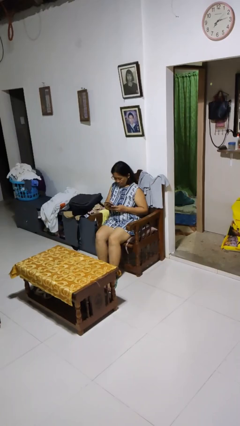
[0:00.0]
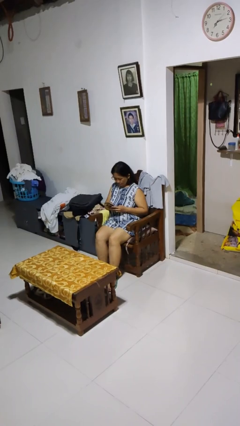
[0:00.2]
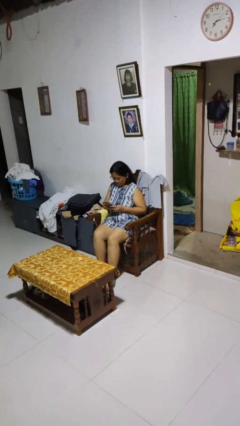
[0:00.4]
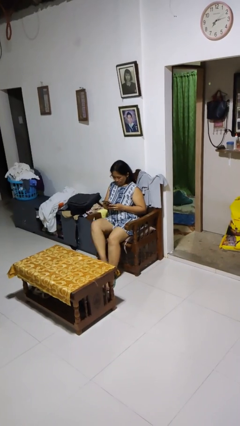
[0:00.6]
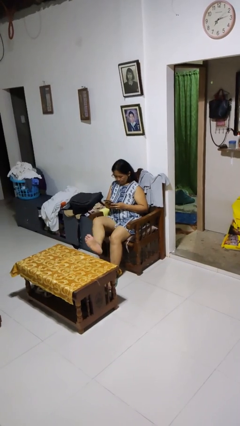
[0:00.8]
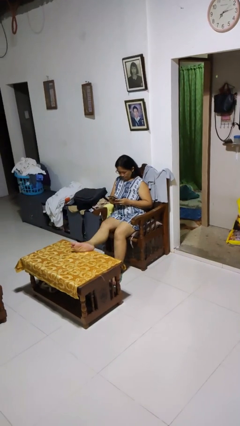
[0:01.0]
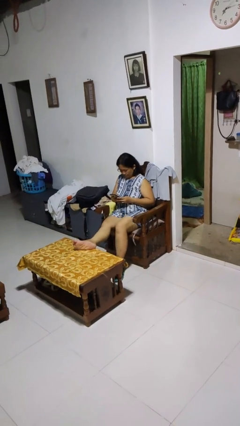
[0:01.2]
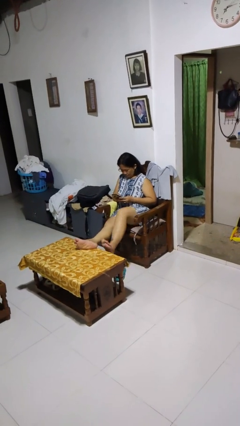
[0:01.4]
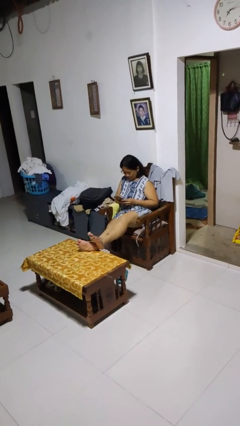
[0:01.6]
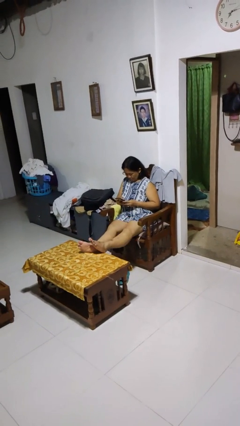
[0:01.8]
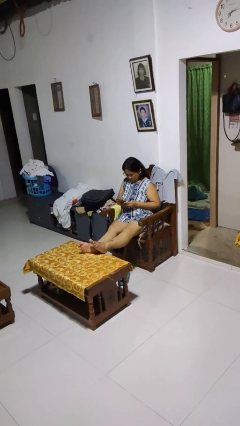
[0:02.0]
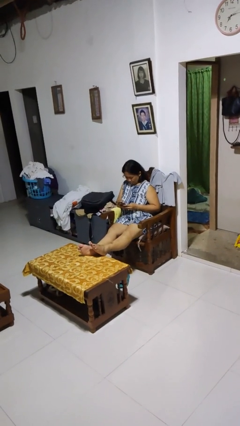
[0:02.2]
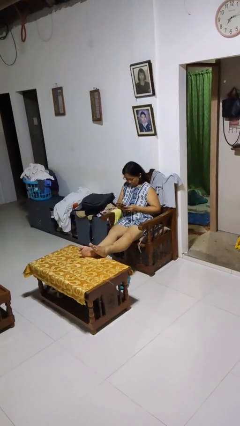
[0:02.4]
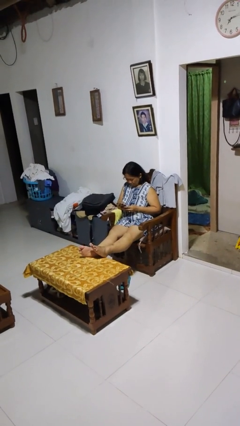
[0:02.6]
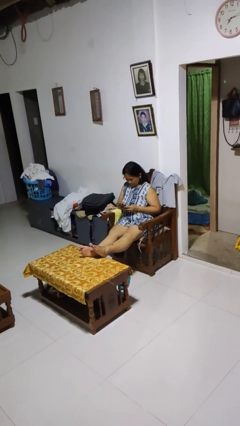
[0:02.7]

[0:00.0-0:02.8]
person puts feet up

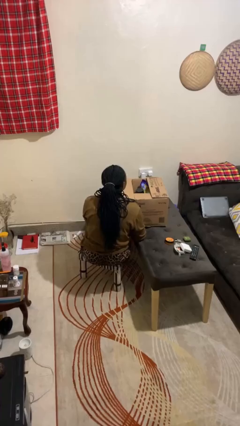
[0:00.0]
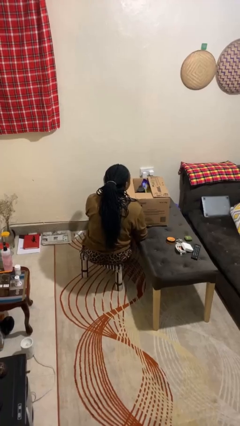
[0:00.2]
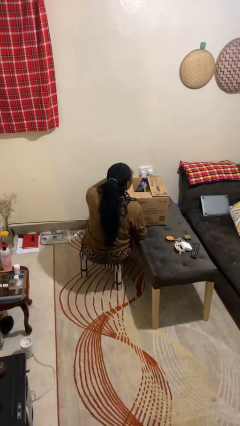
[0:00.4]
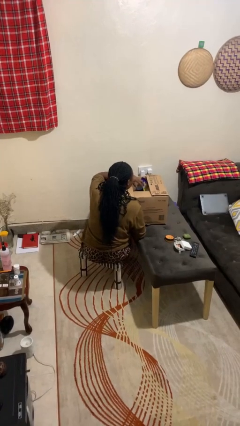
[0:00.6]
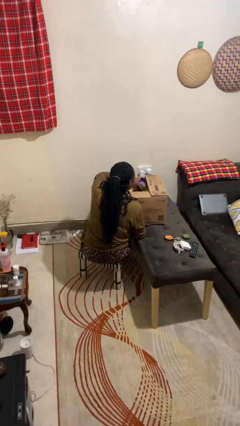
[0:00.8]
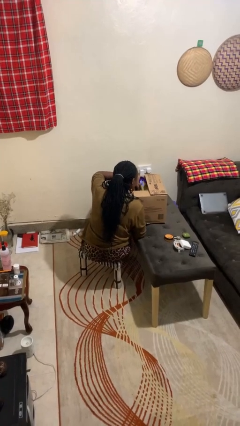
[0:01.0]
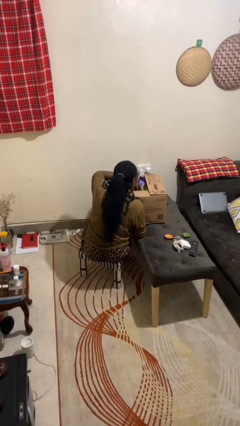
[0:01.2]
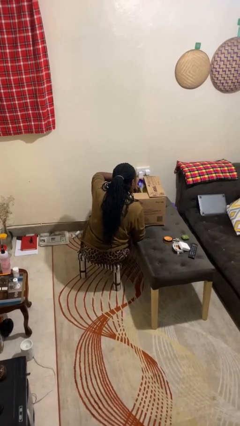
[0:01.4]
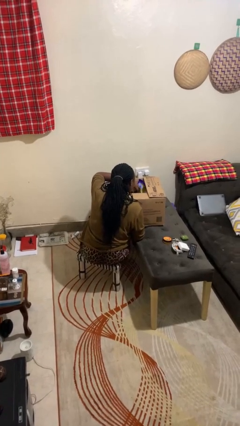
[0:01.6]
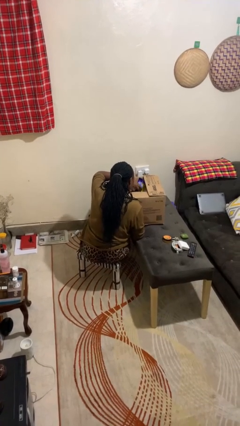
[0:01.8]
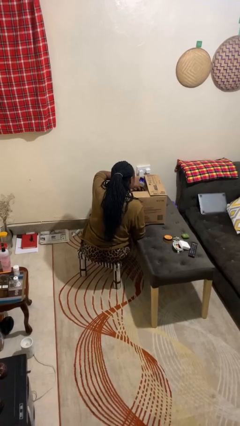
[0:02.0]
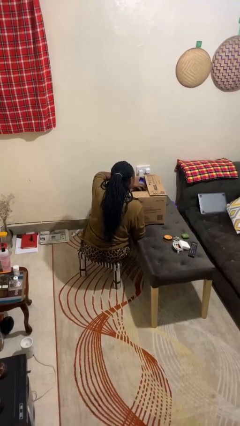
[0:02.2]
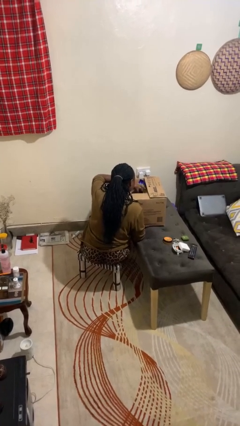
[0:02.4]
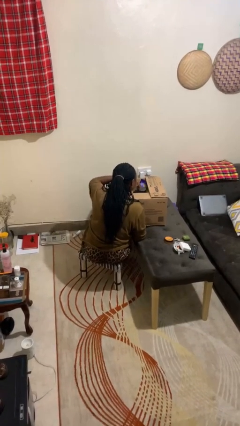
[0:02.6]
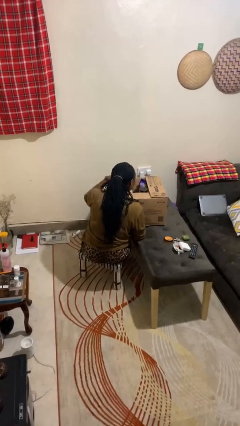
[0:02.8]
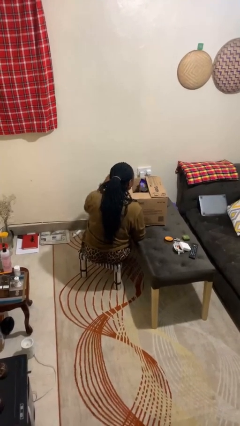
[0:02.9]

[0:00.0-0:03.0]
person searches in box

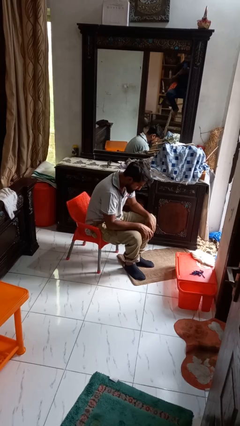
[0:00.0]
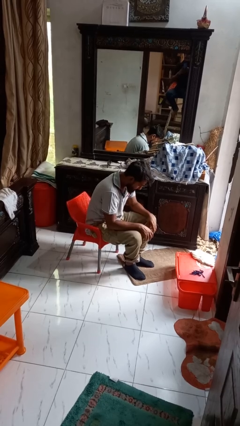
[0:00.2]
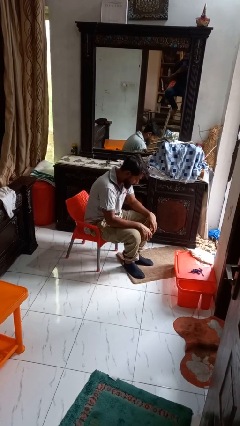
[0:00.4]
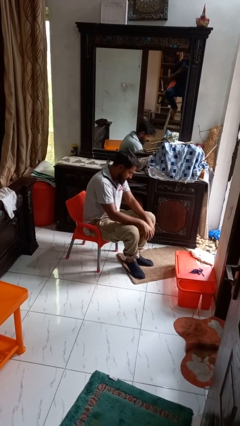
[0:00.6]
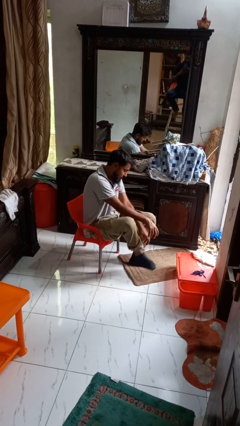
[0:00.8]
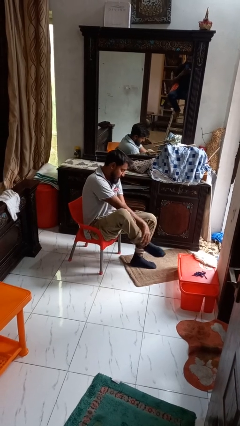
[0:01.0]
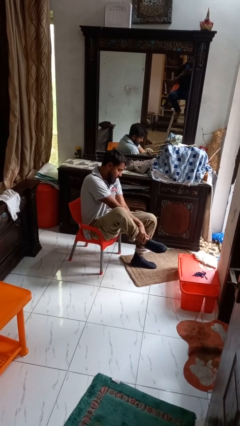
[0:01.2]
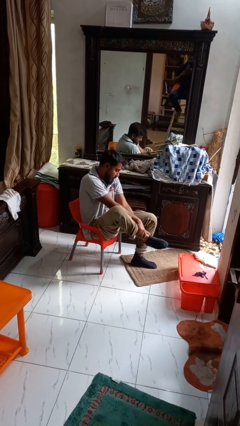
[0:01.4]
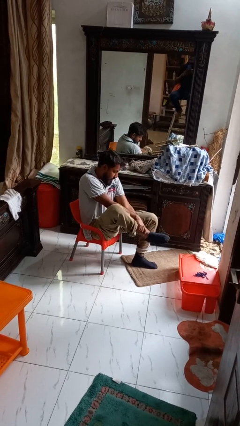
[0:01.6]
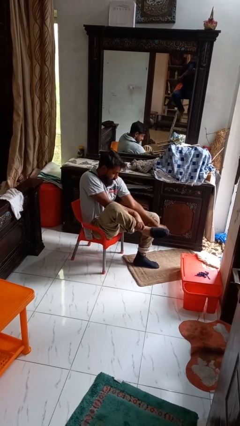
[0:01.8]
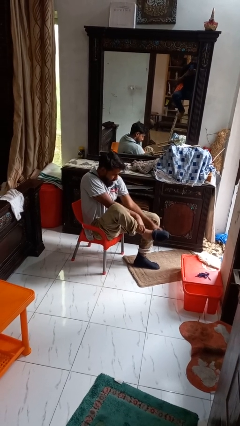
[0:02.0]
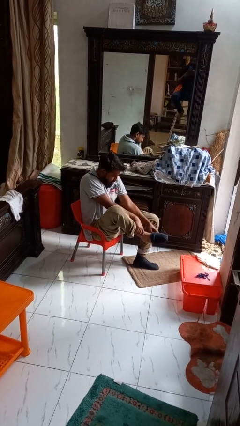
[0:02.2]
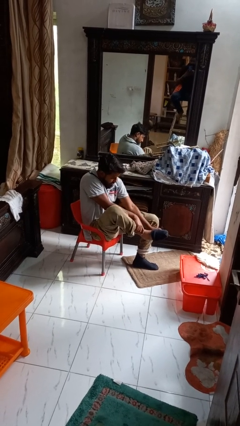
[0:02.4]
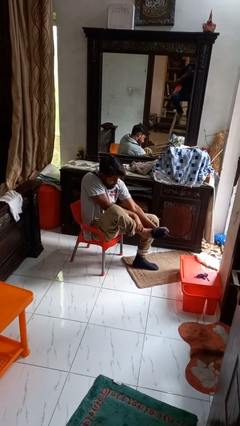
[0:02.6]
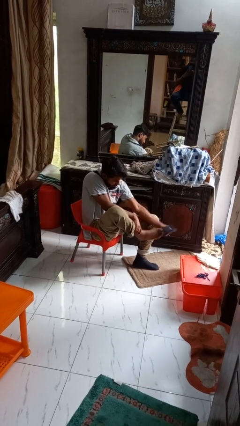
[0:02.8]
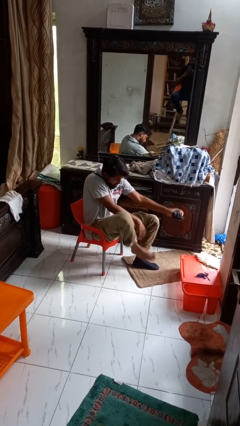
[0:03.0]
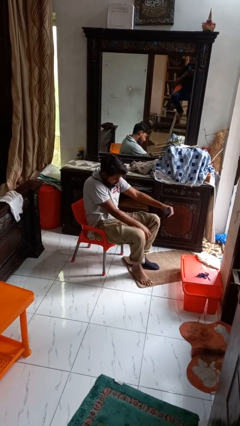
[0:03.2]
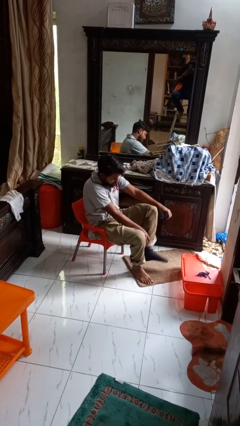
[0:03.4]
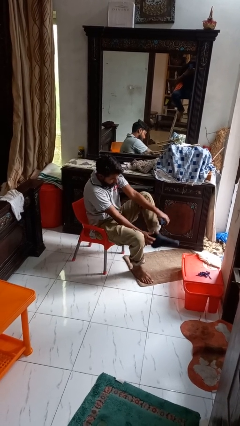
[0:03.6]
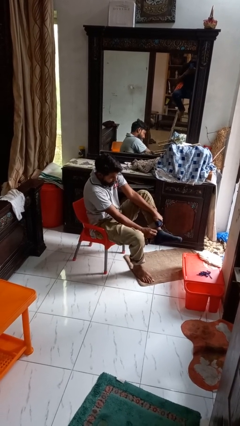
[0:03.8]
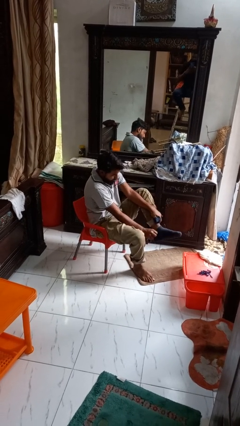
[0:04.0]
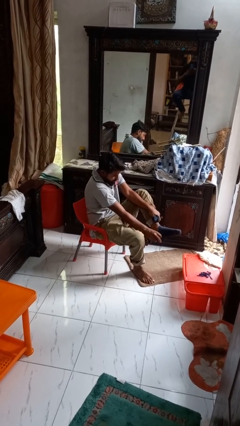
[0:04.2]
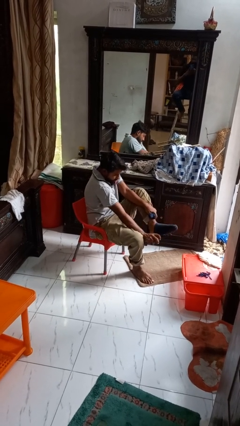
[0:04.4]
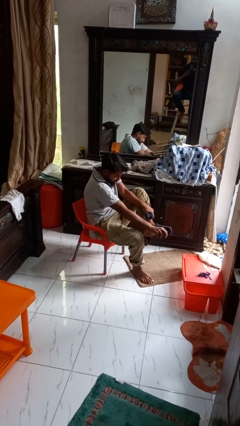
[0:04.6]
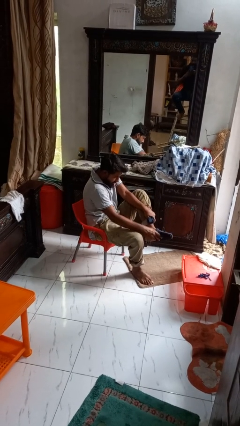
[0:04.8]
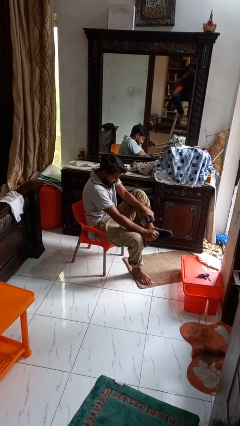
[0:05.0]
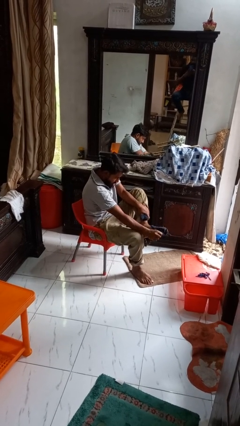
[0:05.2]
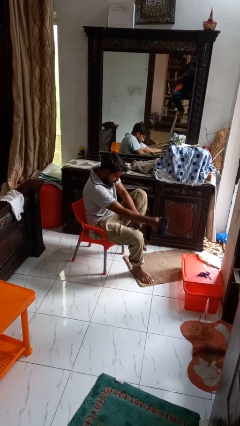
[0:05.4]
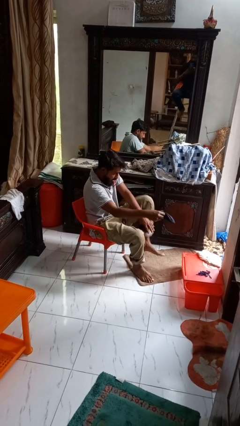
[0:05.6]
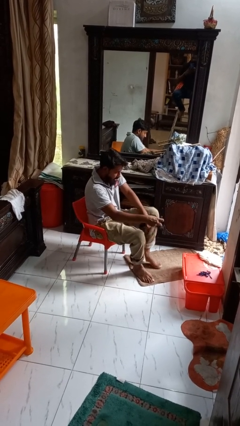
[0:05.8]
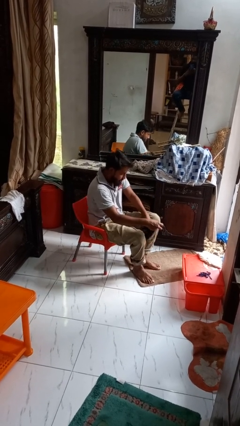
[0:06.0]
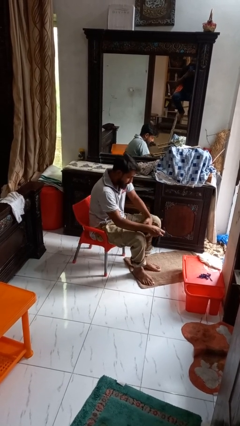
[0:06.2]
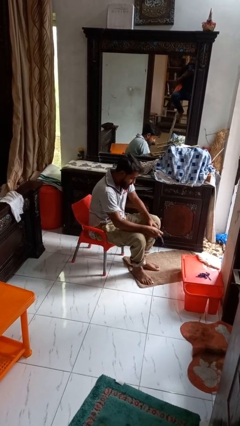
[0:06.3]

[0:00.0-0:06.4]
person takes off socks

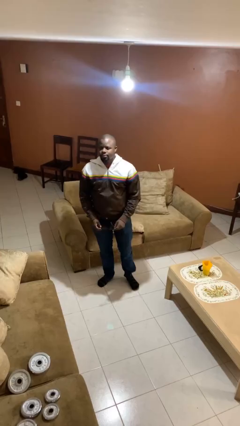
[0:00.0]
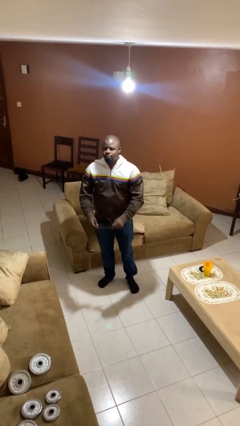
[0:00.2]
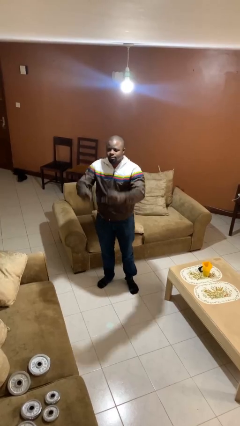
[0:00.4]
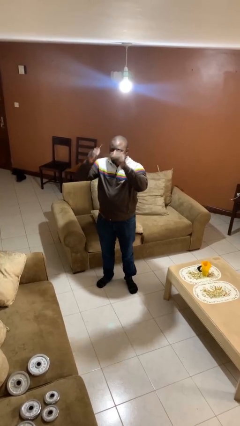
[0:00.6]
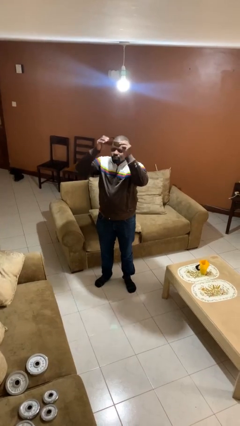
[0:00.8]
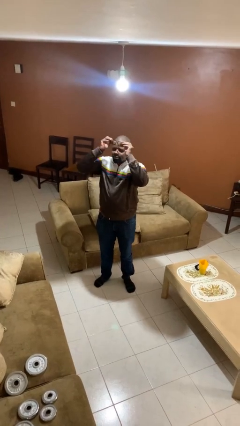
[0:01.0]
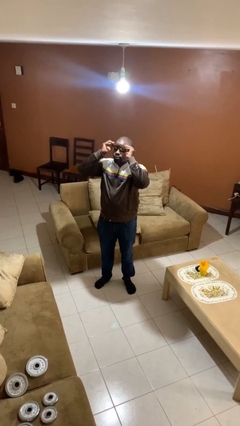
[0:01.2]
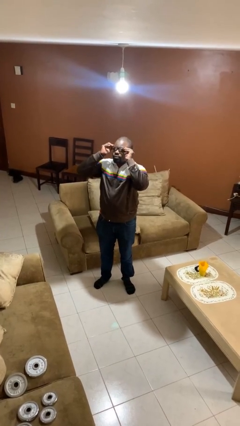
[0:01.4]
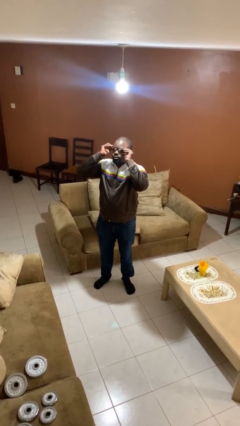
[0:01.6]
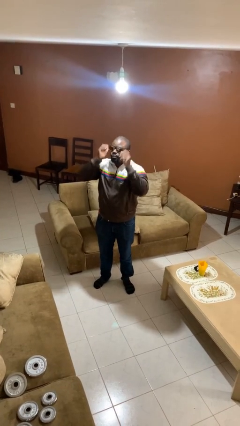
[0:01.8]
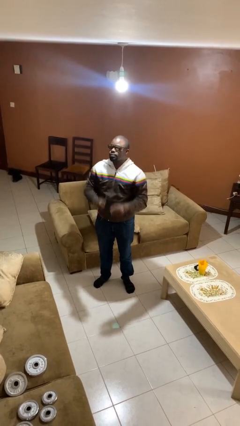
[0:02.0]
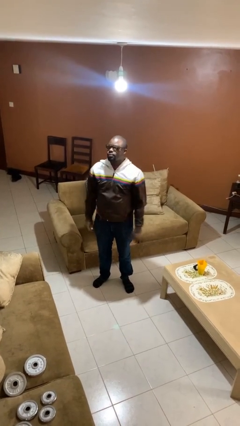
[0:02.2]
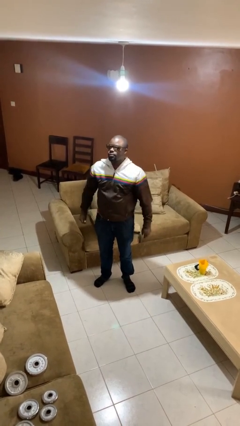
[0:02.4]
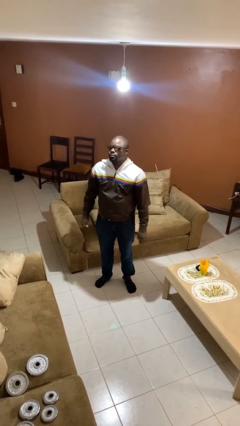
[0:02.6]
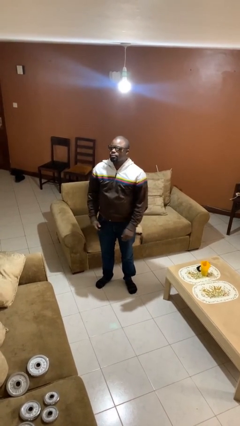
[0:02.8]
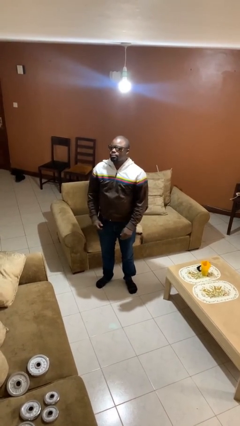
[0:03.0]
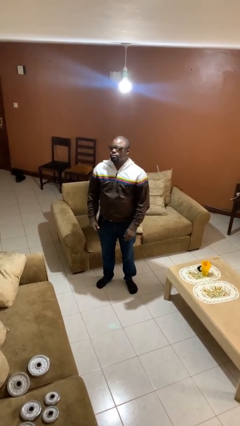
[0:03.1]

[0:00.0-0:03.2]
person puts on sunglasses

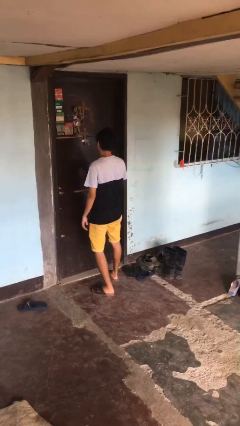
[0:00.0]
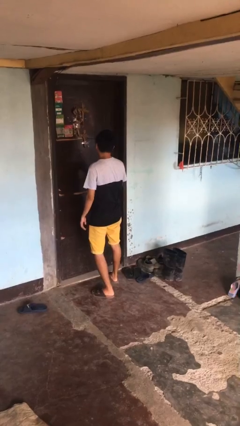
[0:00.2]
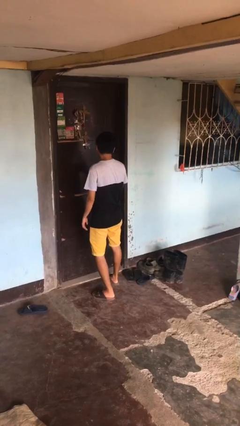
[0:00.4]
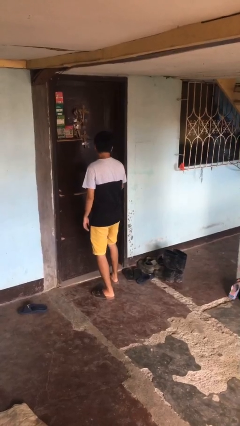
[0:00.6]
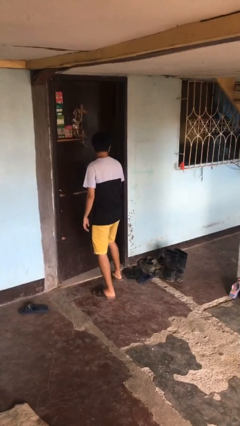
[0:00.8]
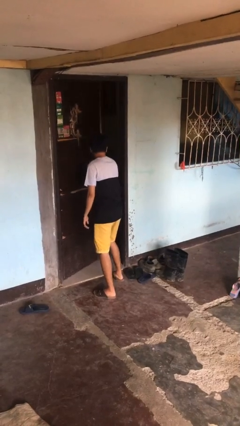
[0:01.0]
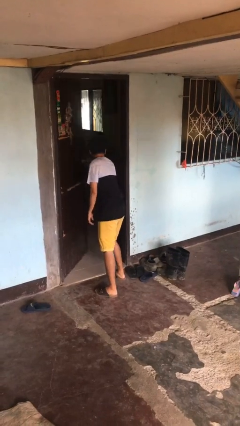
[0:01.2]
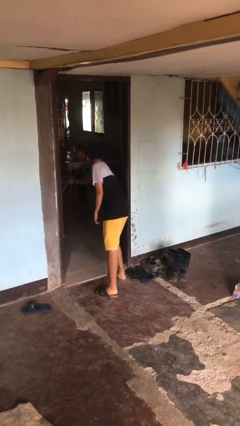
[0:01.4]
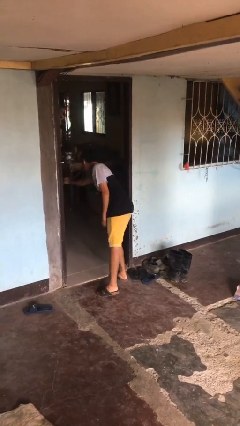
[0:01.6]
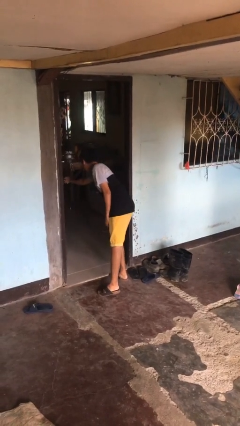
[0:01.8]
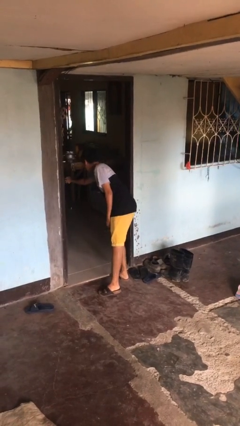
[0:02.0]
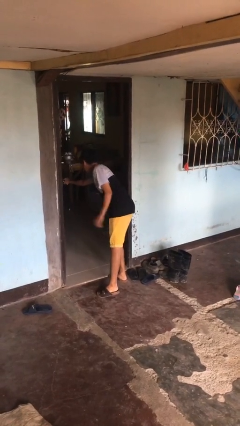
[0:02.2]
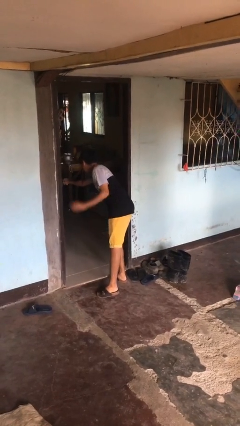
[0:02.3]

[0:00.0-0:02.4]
person opens facility door
